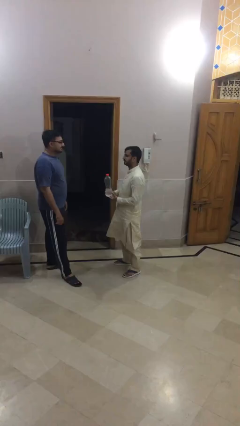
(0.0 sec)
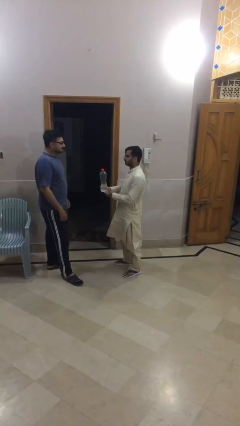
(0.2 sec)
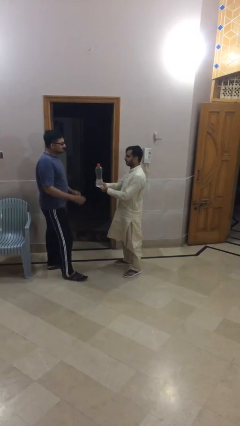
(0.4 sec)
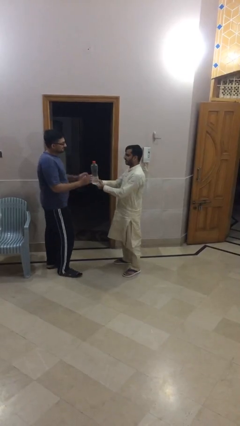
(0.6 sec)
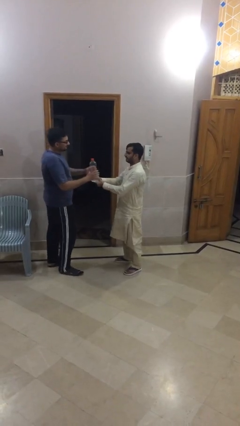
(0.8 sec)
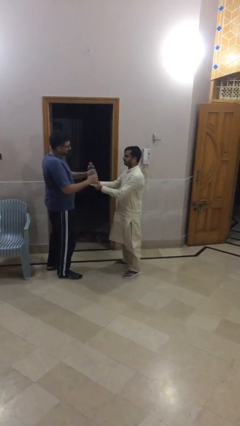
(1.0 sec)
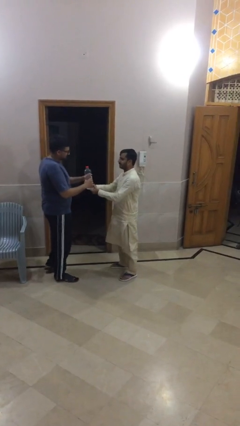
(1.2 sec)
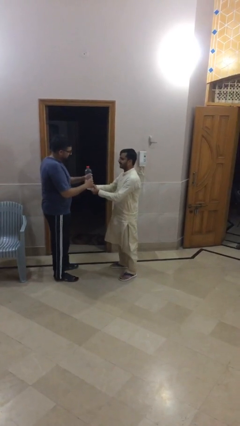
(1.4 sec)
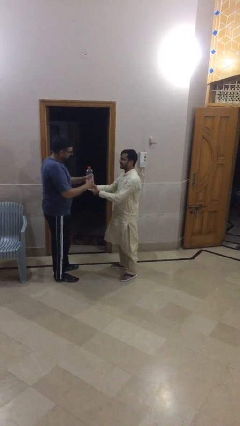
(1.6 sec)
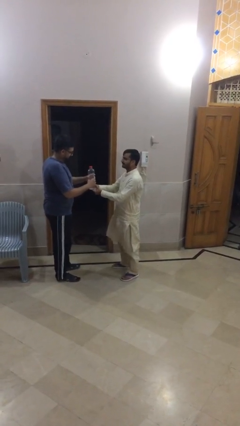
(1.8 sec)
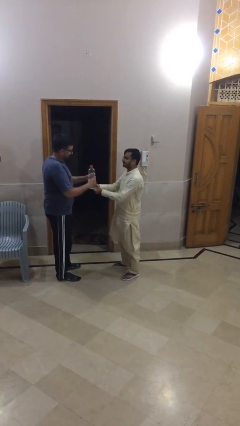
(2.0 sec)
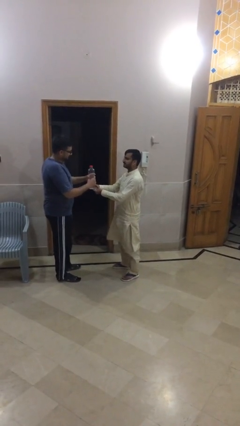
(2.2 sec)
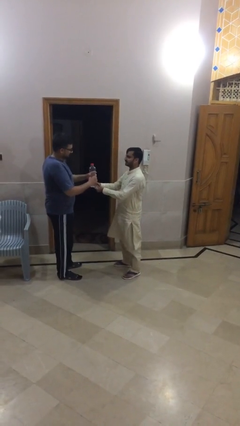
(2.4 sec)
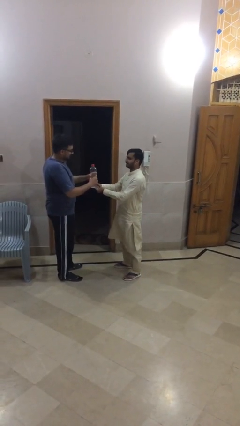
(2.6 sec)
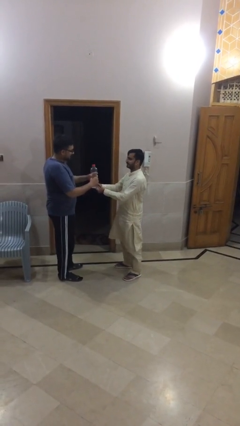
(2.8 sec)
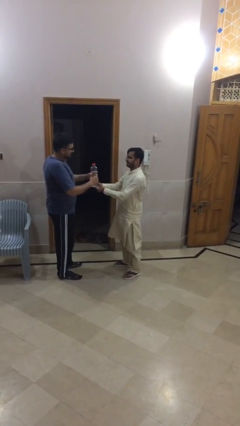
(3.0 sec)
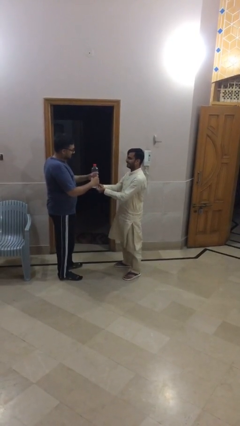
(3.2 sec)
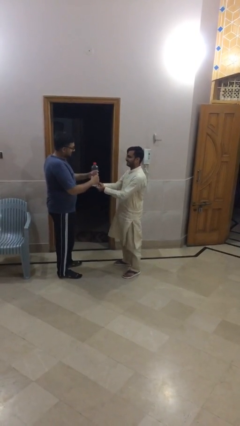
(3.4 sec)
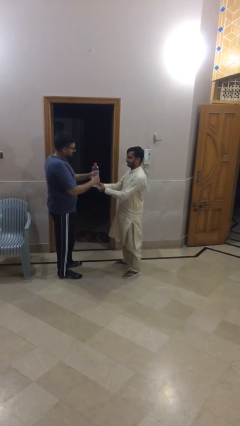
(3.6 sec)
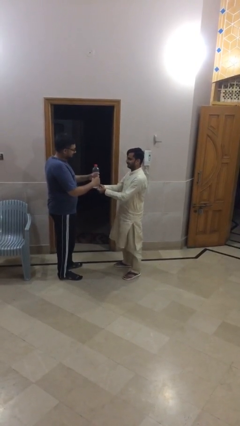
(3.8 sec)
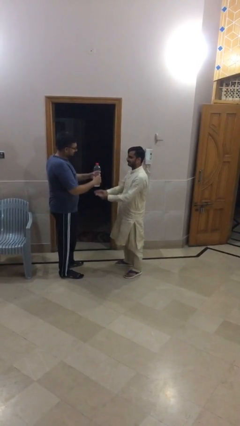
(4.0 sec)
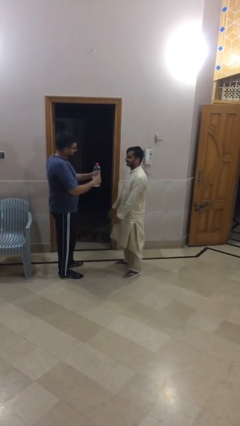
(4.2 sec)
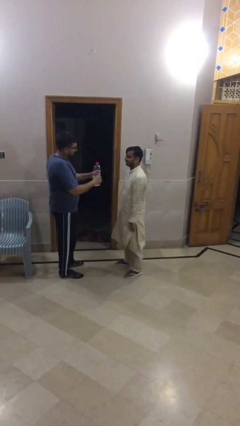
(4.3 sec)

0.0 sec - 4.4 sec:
person transfers object to person

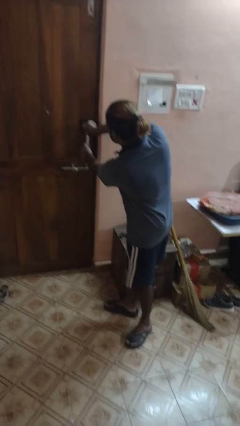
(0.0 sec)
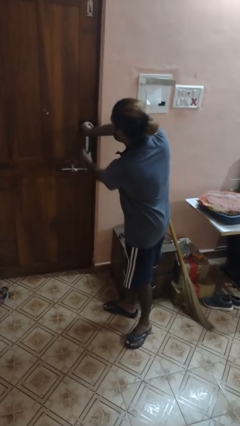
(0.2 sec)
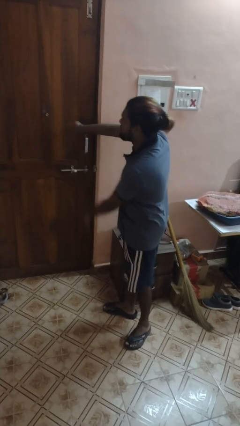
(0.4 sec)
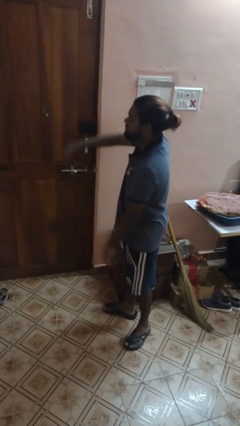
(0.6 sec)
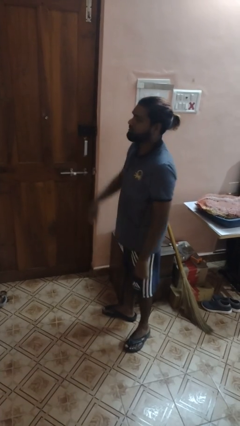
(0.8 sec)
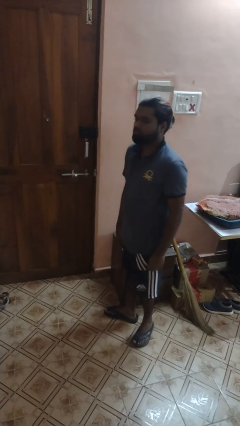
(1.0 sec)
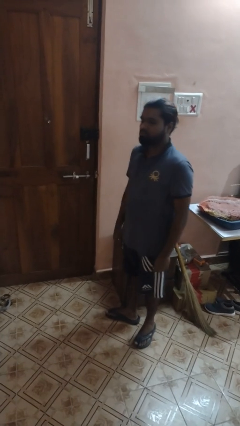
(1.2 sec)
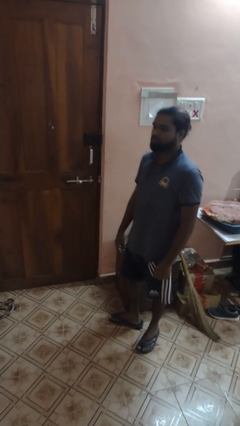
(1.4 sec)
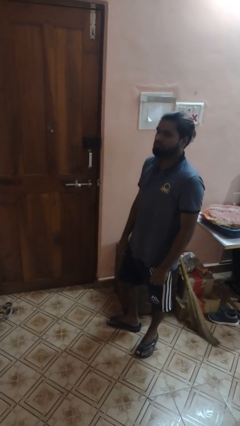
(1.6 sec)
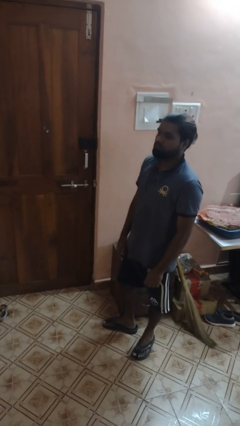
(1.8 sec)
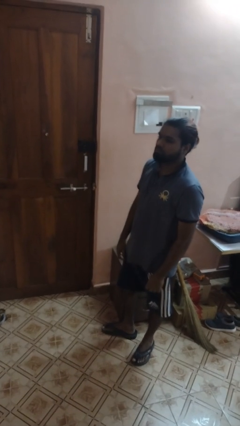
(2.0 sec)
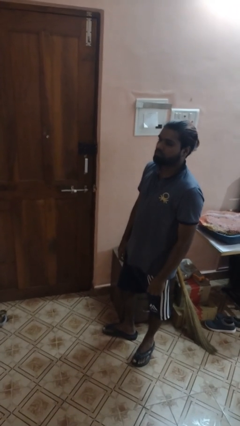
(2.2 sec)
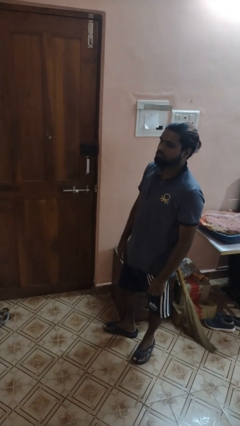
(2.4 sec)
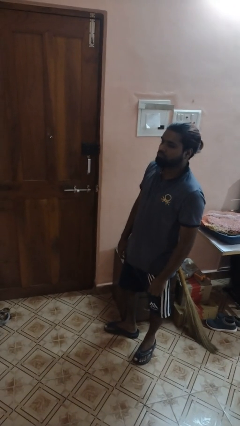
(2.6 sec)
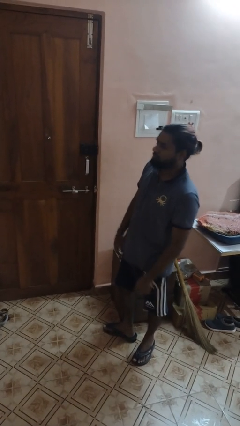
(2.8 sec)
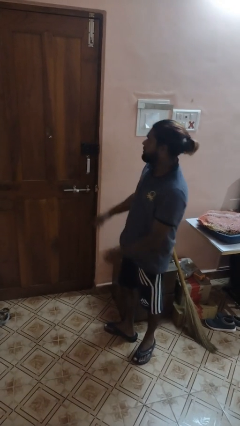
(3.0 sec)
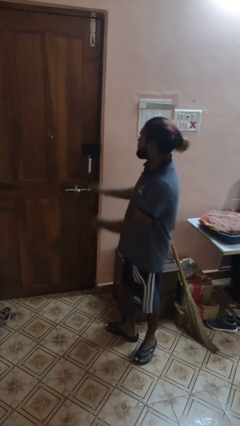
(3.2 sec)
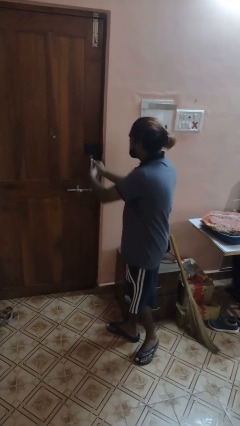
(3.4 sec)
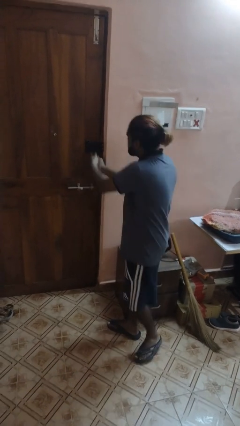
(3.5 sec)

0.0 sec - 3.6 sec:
person locks door with keys

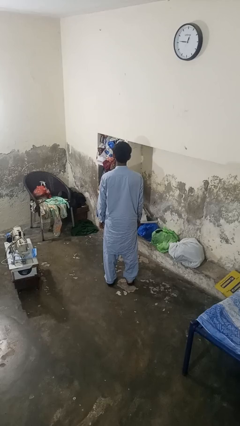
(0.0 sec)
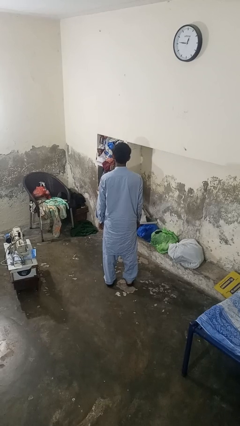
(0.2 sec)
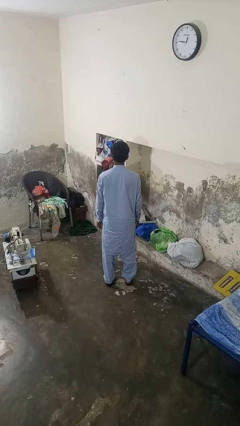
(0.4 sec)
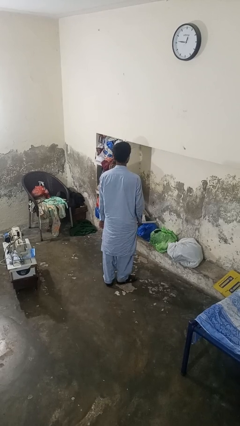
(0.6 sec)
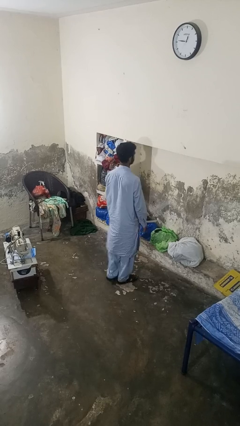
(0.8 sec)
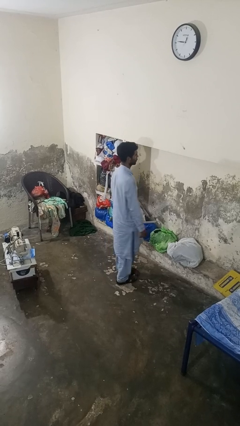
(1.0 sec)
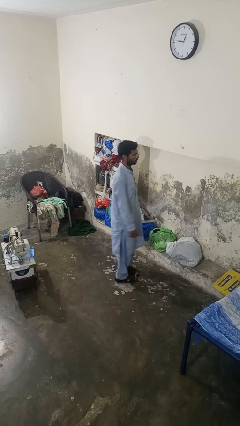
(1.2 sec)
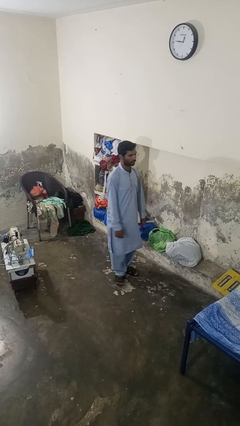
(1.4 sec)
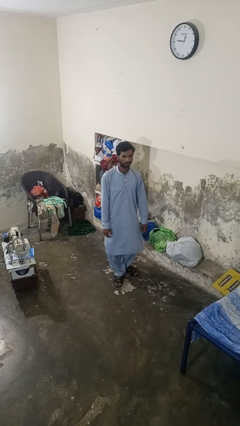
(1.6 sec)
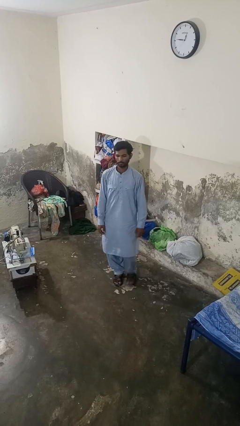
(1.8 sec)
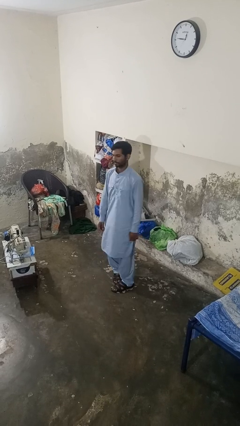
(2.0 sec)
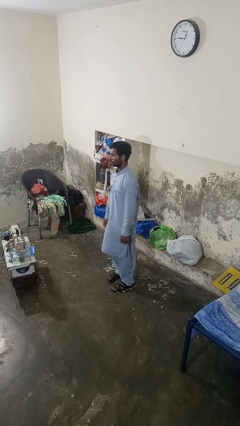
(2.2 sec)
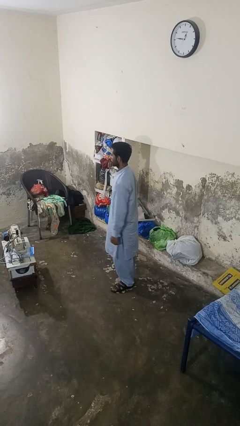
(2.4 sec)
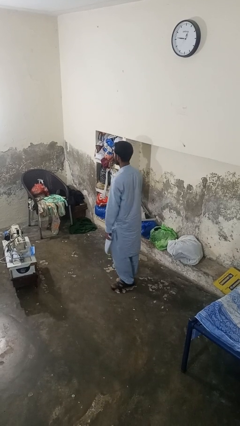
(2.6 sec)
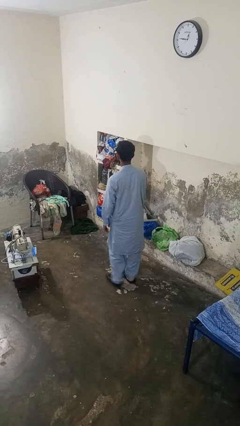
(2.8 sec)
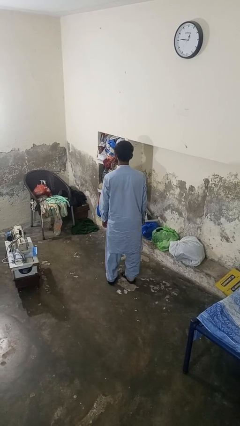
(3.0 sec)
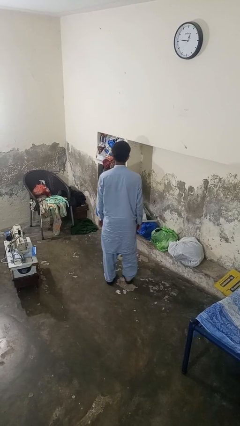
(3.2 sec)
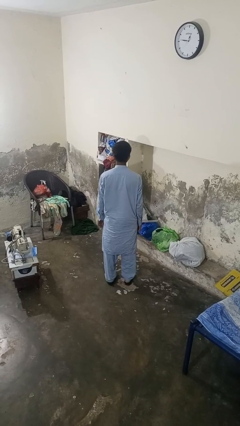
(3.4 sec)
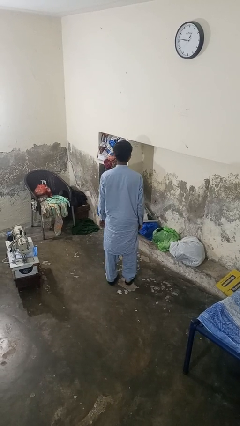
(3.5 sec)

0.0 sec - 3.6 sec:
person twirls

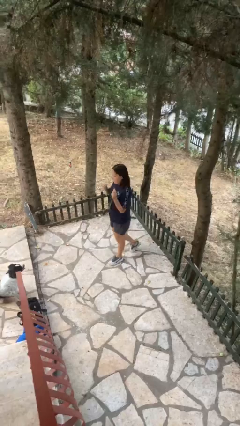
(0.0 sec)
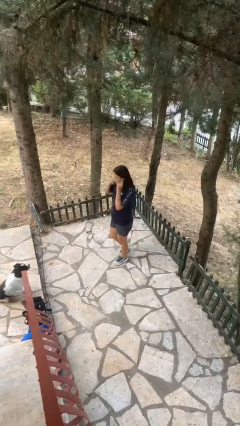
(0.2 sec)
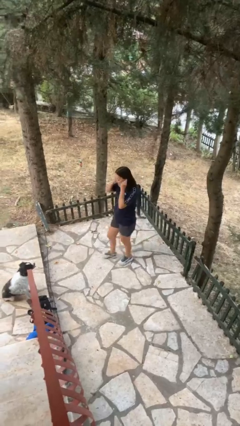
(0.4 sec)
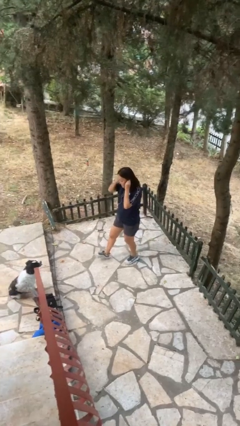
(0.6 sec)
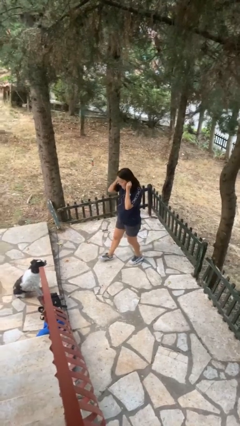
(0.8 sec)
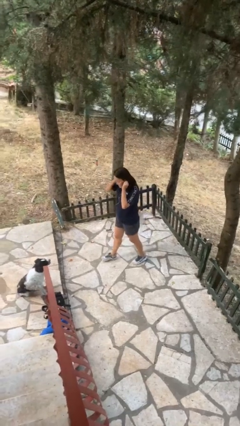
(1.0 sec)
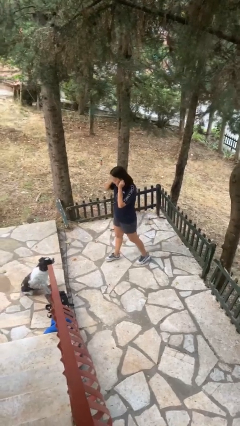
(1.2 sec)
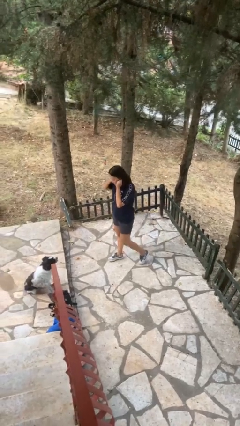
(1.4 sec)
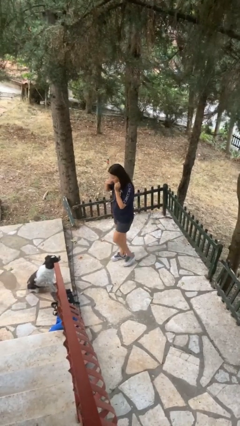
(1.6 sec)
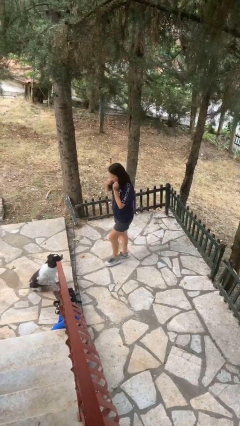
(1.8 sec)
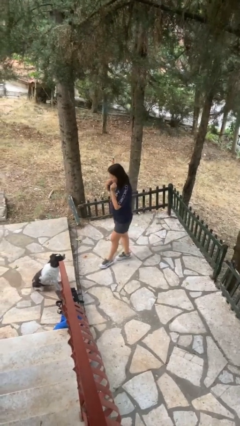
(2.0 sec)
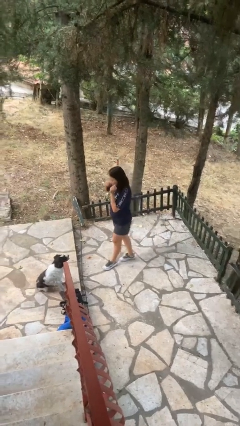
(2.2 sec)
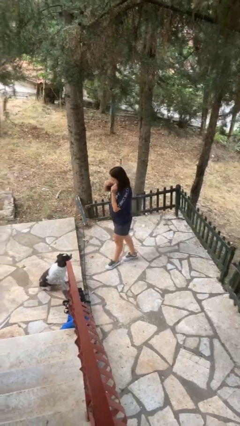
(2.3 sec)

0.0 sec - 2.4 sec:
person puts on headphones

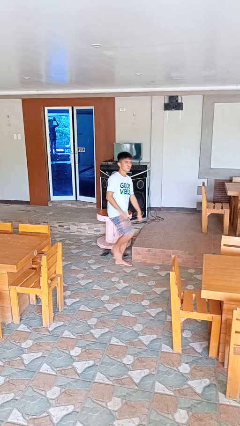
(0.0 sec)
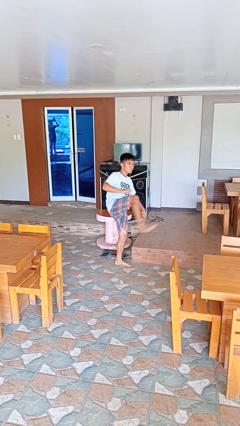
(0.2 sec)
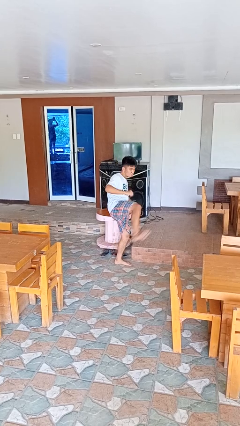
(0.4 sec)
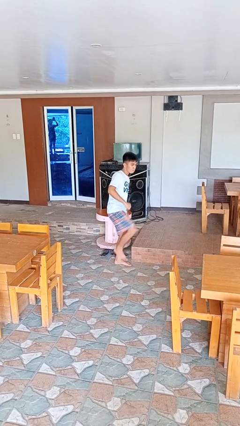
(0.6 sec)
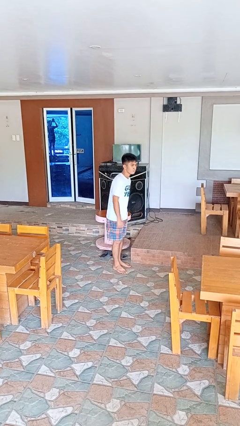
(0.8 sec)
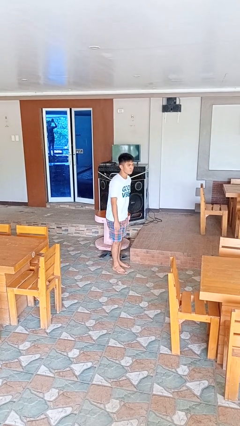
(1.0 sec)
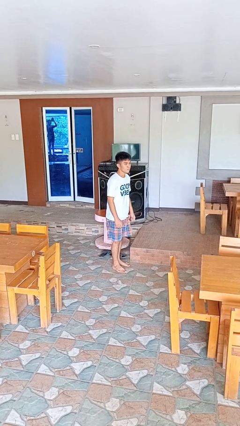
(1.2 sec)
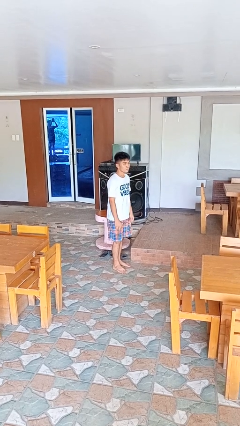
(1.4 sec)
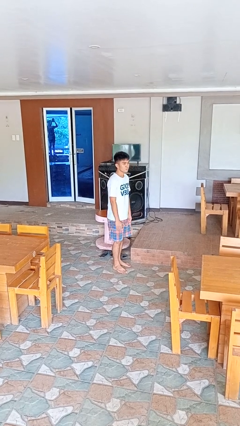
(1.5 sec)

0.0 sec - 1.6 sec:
person karate kicks

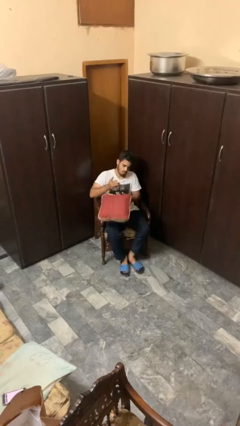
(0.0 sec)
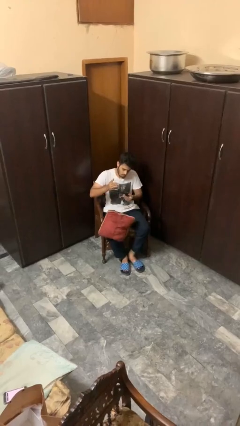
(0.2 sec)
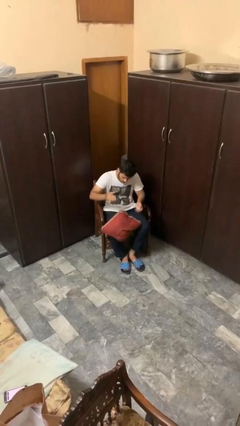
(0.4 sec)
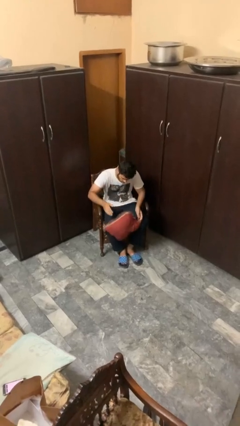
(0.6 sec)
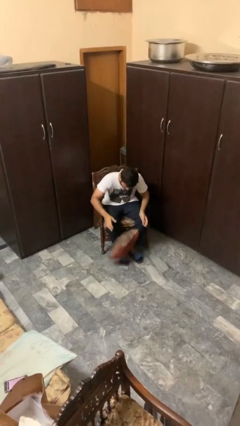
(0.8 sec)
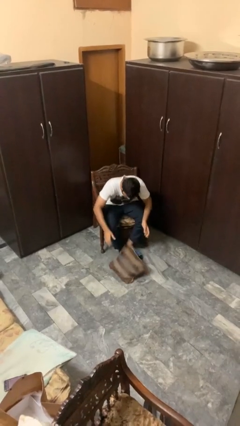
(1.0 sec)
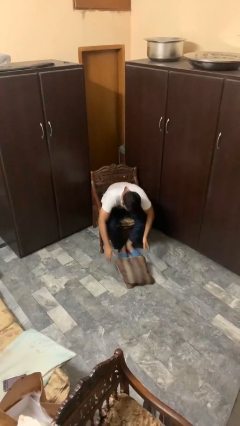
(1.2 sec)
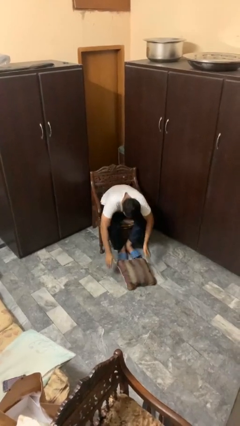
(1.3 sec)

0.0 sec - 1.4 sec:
person drops object

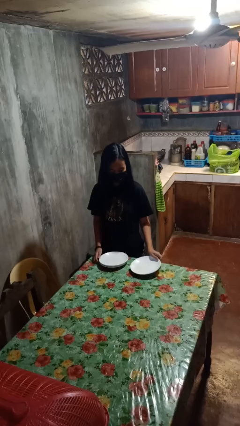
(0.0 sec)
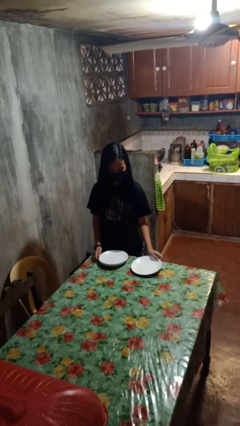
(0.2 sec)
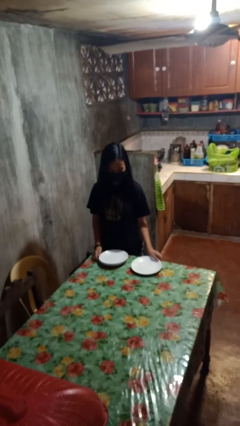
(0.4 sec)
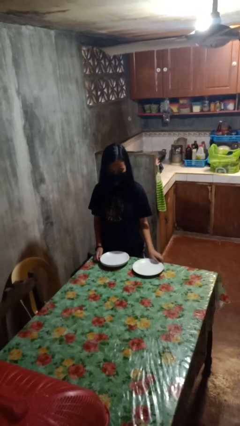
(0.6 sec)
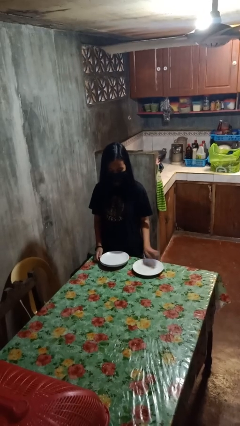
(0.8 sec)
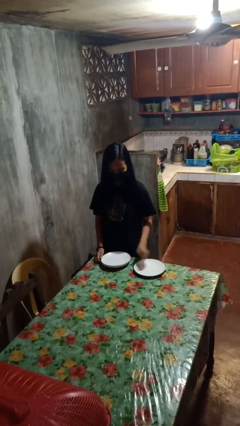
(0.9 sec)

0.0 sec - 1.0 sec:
person sets table
